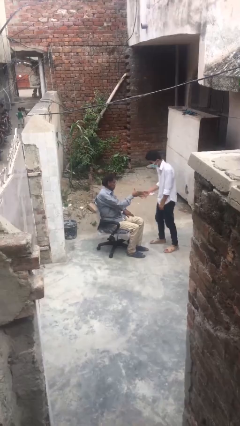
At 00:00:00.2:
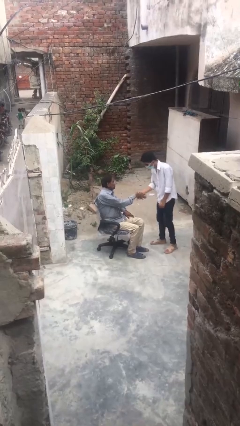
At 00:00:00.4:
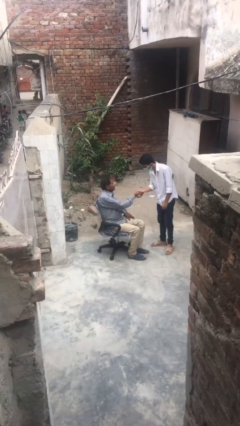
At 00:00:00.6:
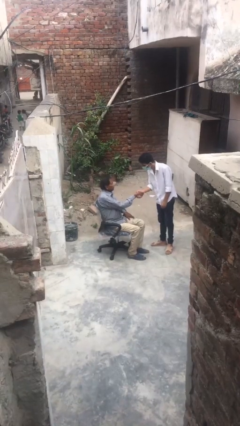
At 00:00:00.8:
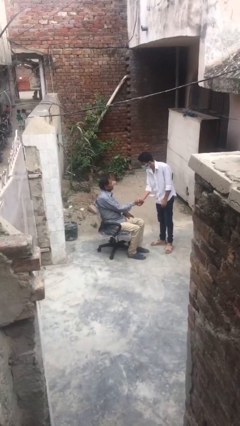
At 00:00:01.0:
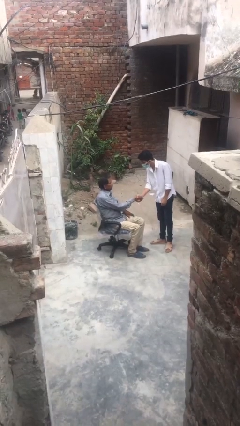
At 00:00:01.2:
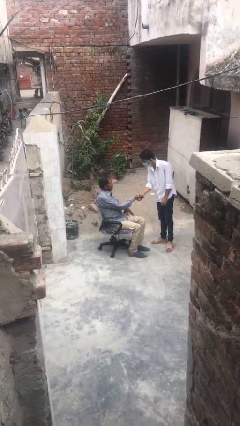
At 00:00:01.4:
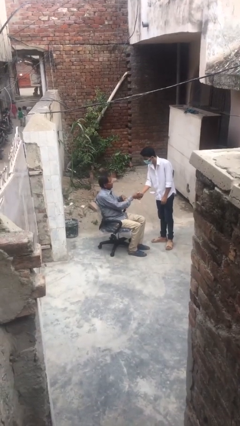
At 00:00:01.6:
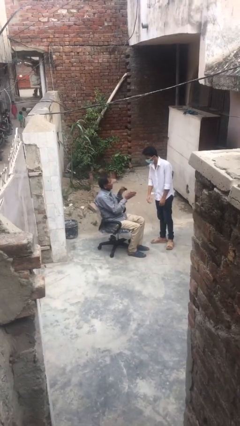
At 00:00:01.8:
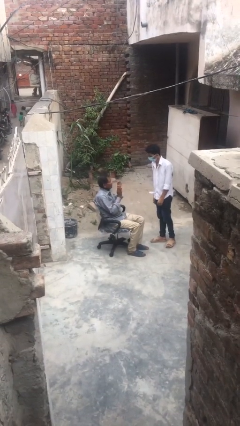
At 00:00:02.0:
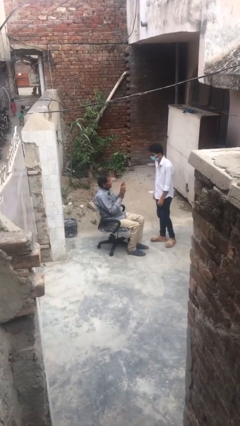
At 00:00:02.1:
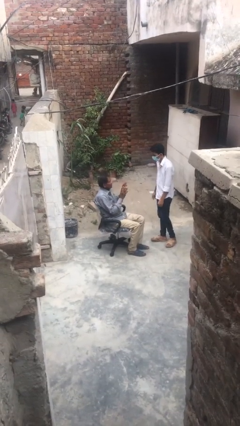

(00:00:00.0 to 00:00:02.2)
person shakes hand

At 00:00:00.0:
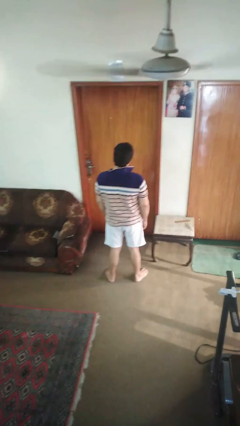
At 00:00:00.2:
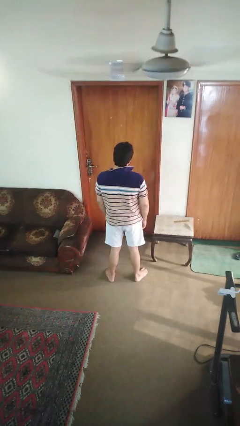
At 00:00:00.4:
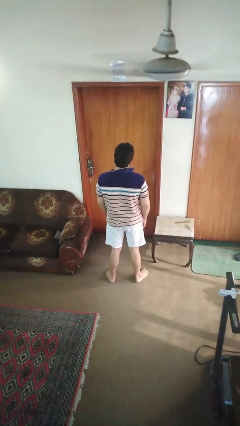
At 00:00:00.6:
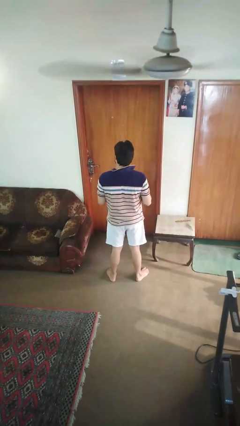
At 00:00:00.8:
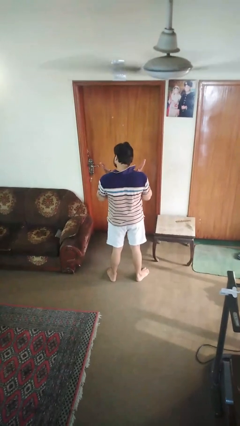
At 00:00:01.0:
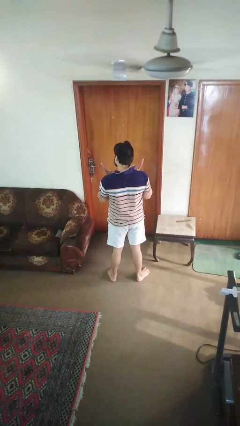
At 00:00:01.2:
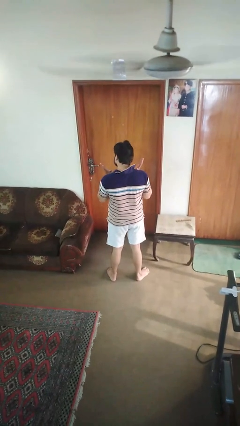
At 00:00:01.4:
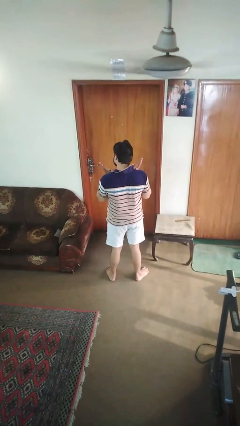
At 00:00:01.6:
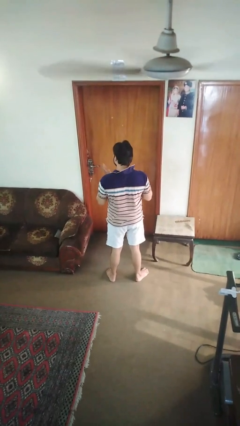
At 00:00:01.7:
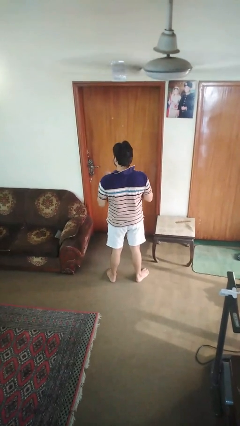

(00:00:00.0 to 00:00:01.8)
person shrugs

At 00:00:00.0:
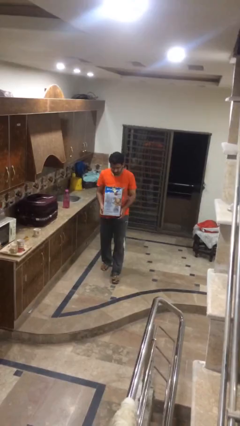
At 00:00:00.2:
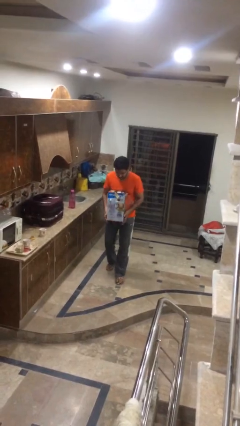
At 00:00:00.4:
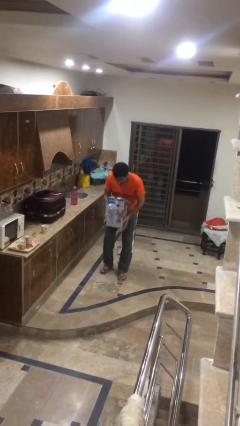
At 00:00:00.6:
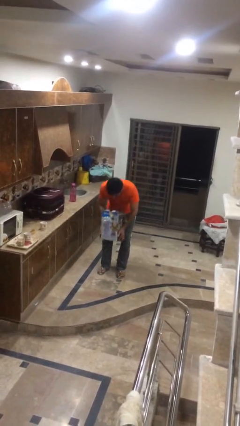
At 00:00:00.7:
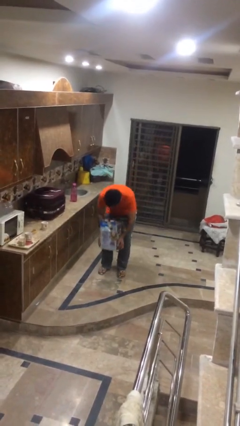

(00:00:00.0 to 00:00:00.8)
person puts down object on floor

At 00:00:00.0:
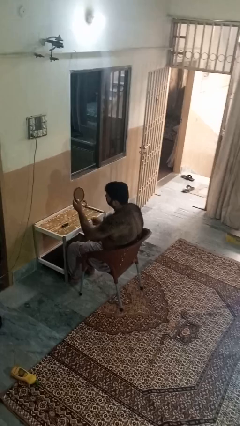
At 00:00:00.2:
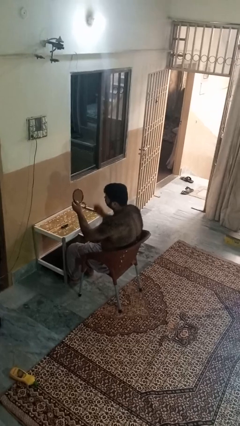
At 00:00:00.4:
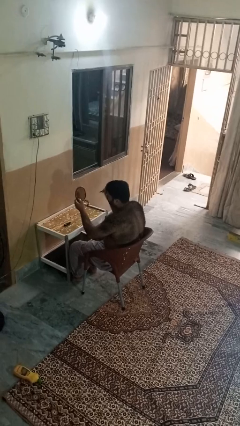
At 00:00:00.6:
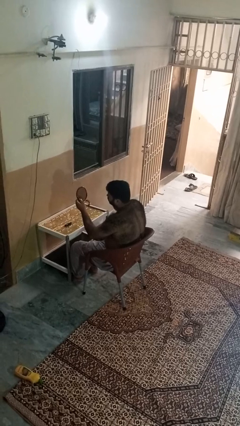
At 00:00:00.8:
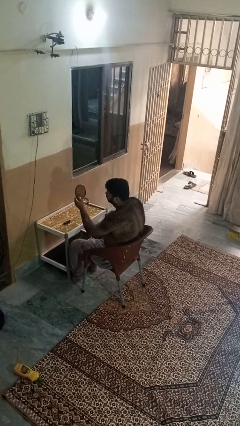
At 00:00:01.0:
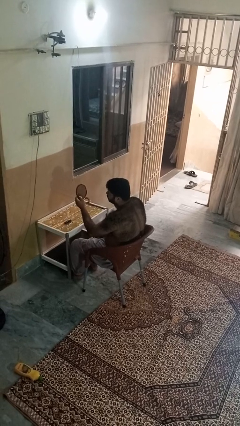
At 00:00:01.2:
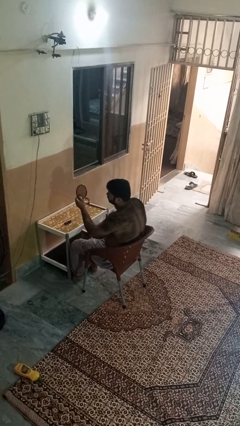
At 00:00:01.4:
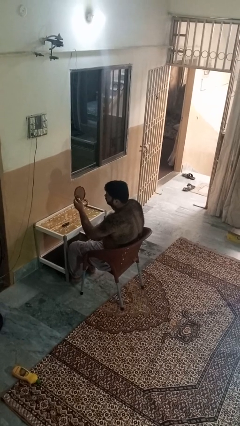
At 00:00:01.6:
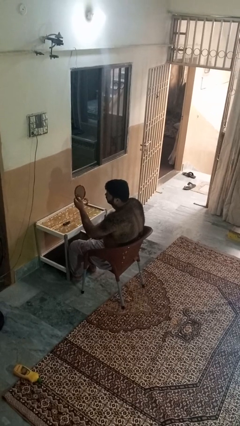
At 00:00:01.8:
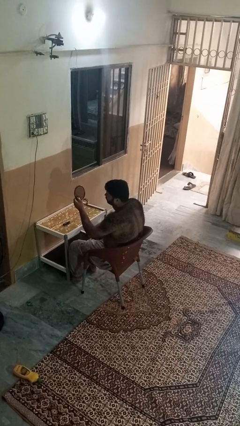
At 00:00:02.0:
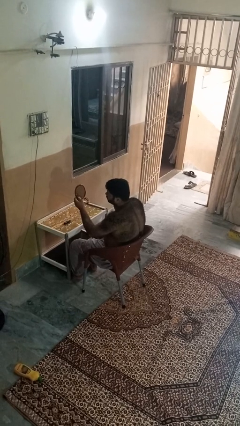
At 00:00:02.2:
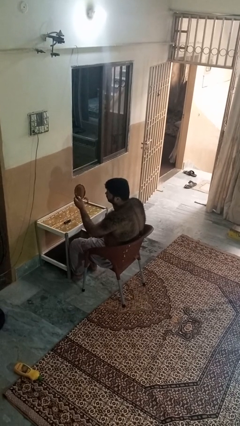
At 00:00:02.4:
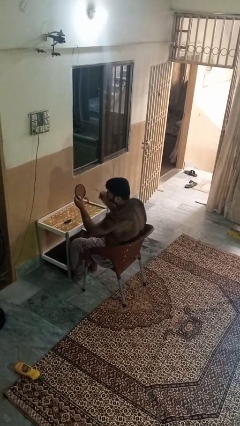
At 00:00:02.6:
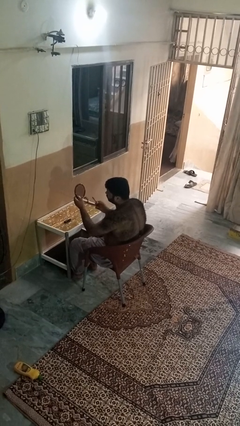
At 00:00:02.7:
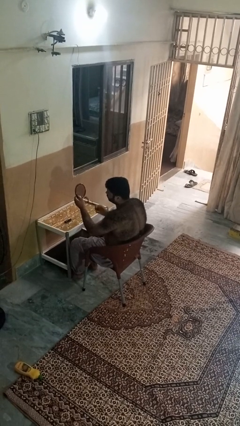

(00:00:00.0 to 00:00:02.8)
person applies eye makeup

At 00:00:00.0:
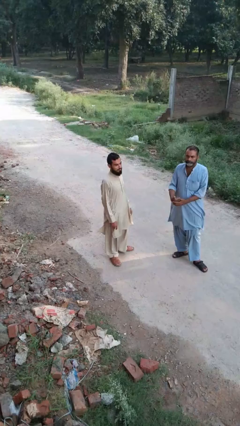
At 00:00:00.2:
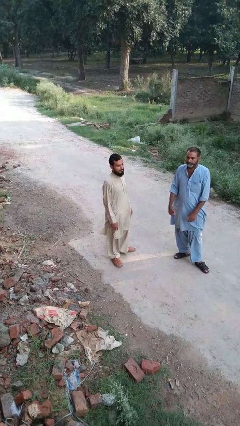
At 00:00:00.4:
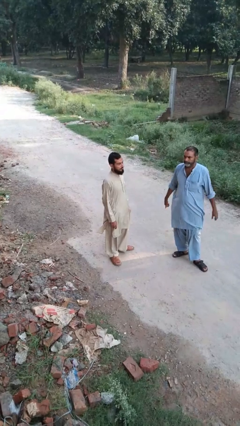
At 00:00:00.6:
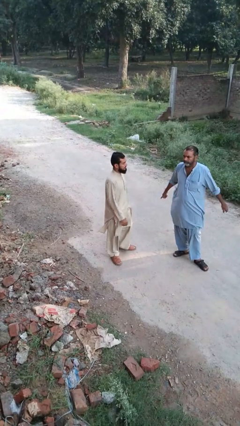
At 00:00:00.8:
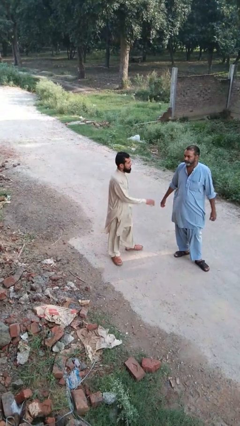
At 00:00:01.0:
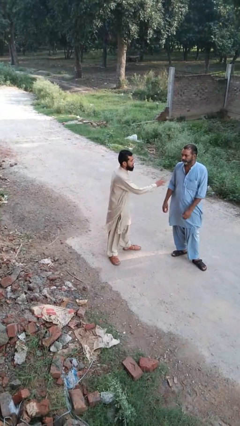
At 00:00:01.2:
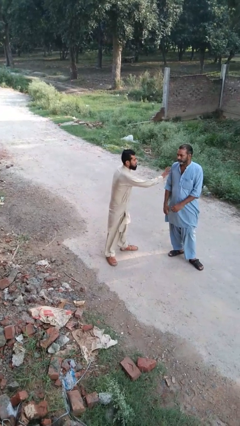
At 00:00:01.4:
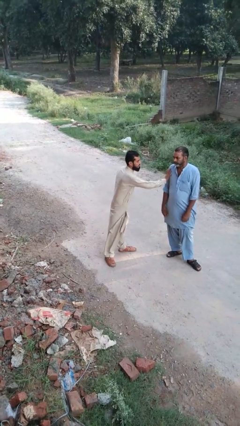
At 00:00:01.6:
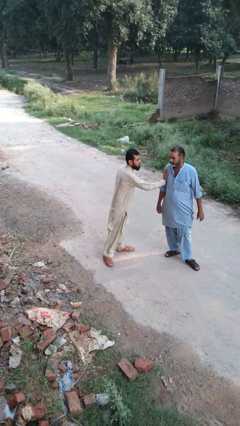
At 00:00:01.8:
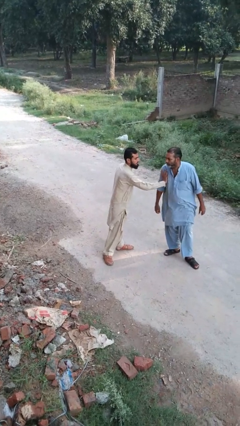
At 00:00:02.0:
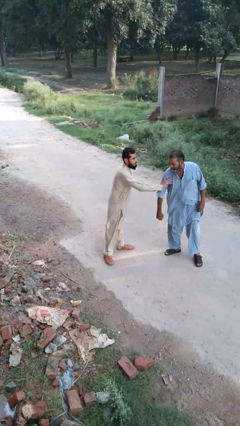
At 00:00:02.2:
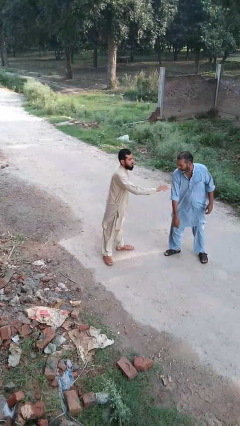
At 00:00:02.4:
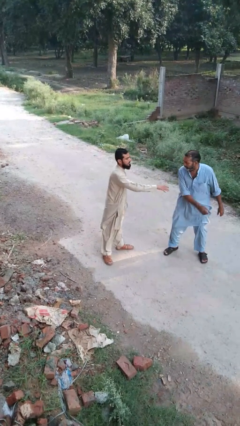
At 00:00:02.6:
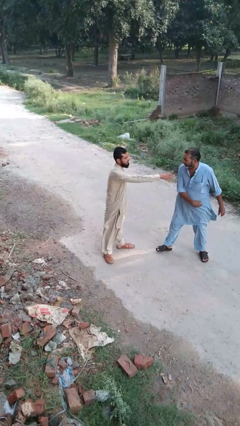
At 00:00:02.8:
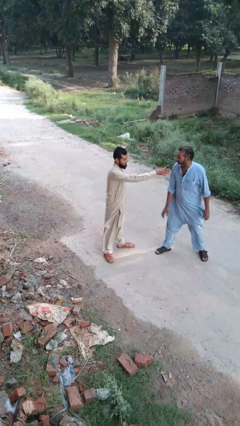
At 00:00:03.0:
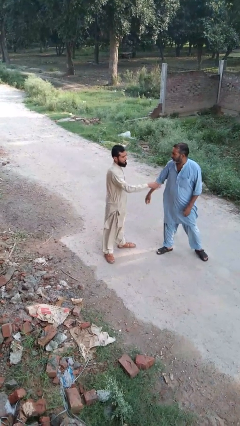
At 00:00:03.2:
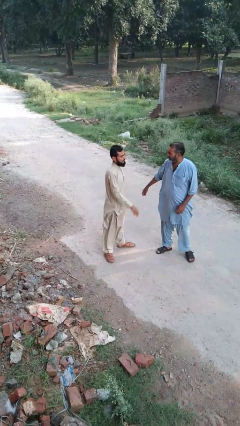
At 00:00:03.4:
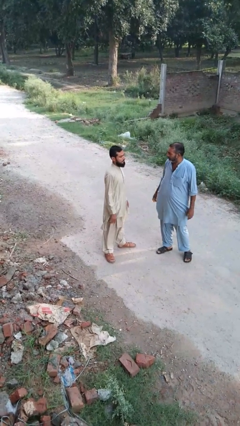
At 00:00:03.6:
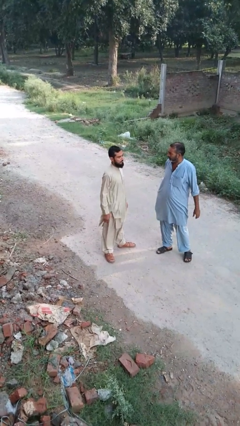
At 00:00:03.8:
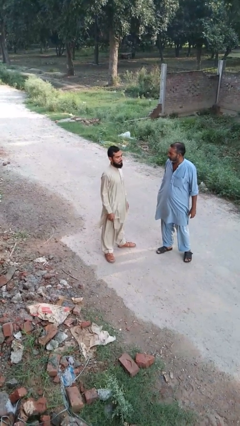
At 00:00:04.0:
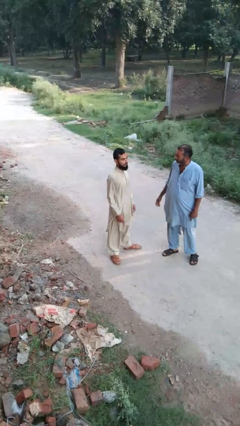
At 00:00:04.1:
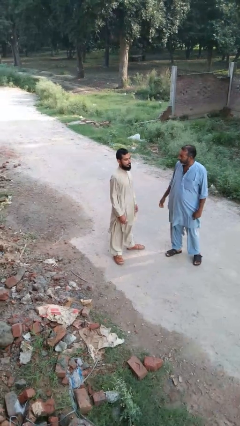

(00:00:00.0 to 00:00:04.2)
person shoves person

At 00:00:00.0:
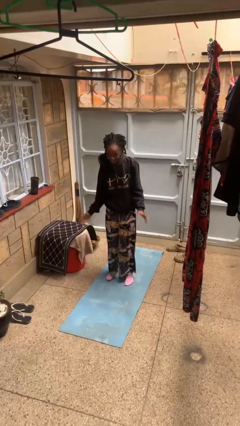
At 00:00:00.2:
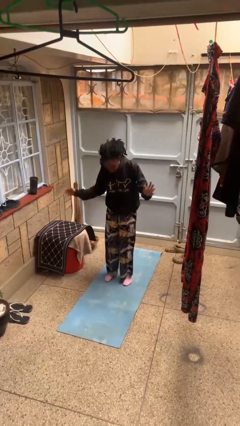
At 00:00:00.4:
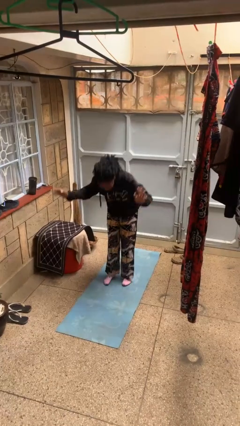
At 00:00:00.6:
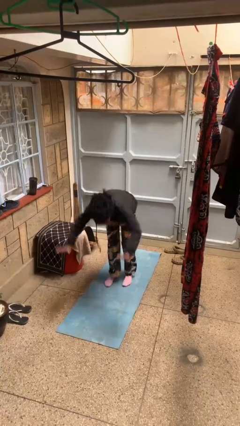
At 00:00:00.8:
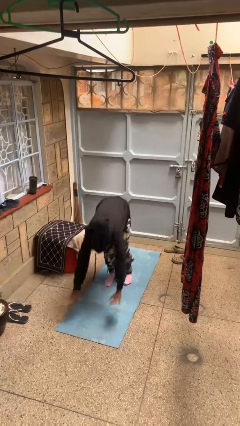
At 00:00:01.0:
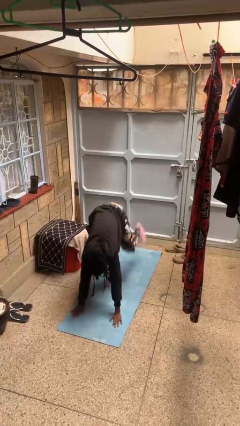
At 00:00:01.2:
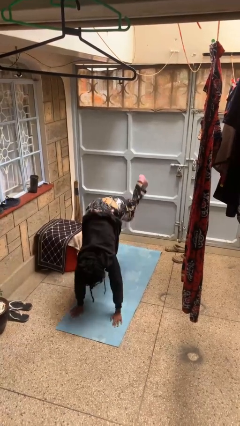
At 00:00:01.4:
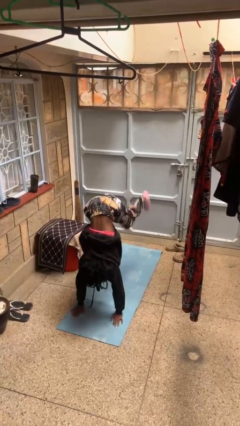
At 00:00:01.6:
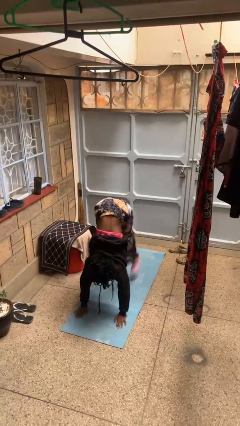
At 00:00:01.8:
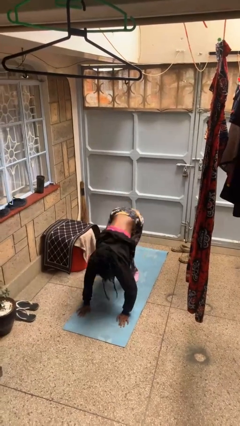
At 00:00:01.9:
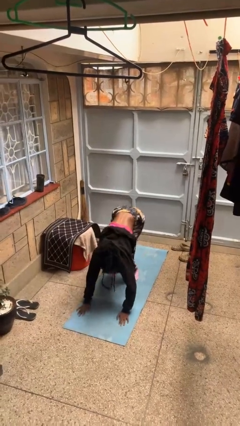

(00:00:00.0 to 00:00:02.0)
person handstand

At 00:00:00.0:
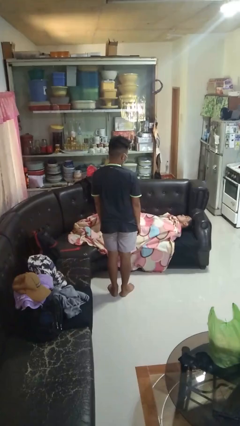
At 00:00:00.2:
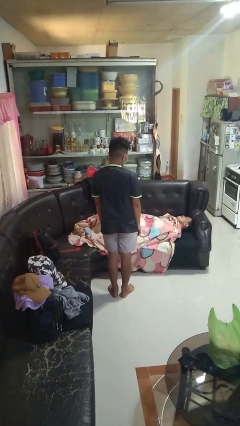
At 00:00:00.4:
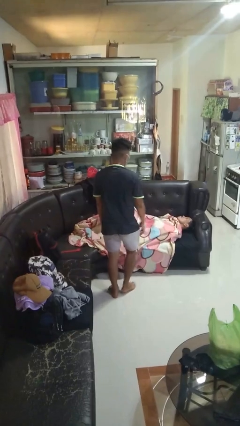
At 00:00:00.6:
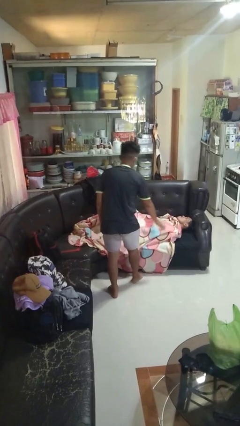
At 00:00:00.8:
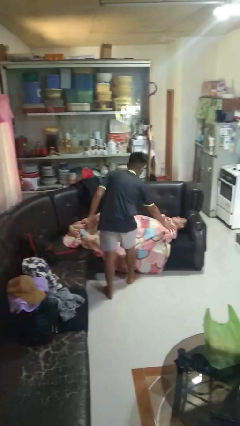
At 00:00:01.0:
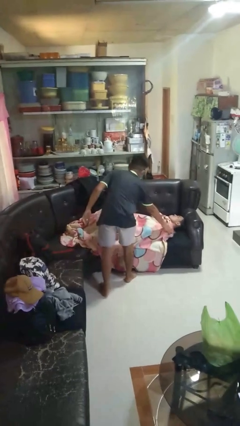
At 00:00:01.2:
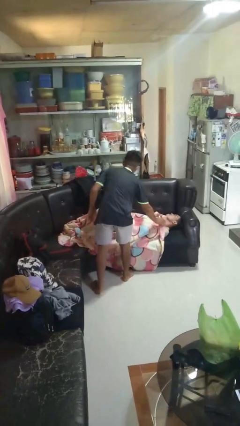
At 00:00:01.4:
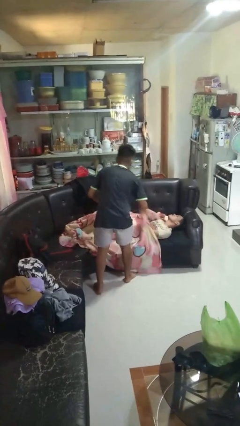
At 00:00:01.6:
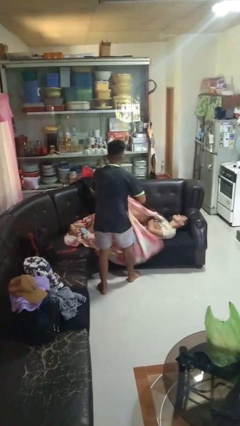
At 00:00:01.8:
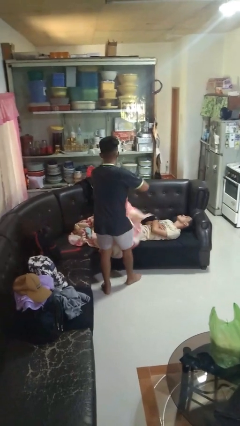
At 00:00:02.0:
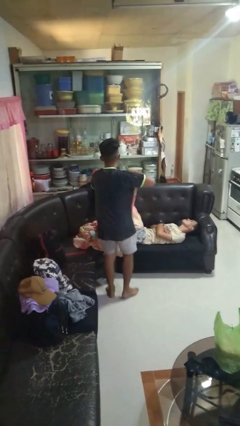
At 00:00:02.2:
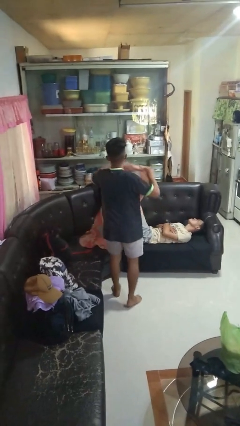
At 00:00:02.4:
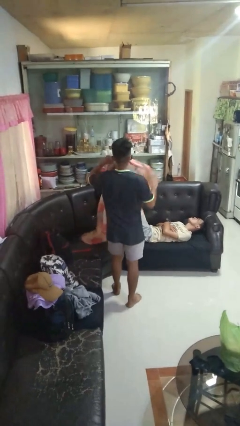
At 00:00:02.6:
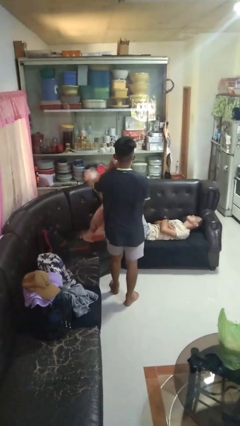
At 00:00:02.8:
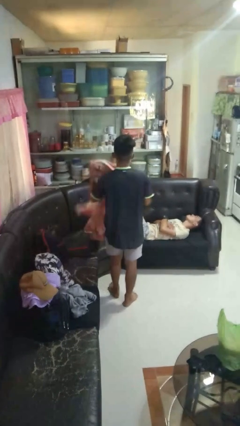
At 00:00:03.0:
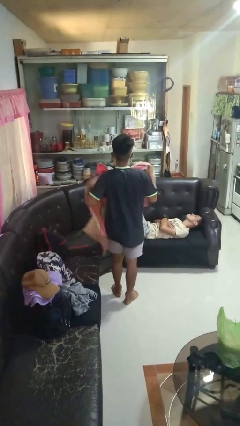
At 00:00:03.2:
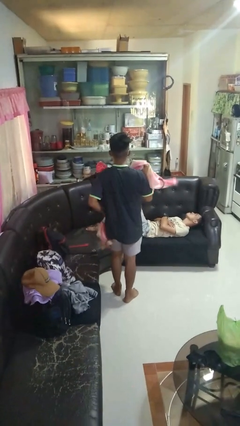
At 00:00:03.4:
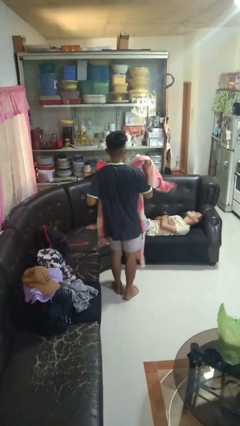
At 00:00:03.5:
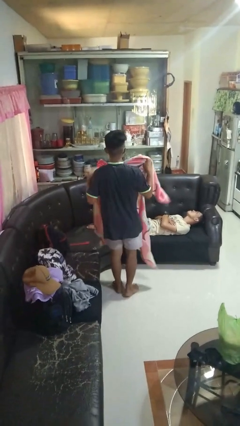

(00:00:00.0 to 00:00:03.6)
person uncovers friend with blanket
